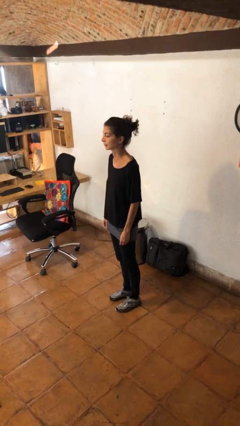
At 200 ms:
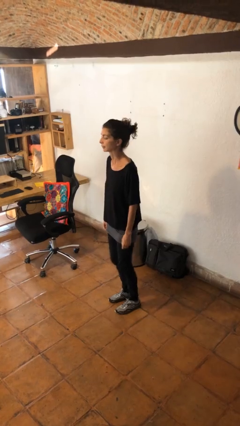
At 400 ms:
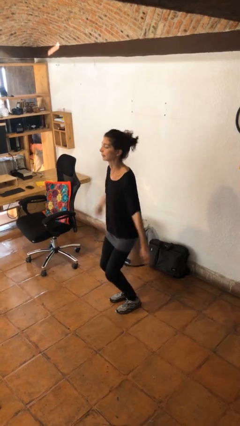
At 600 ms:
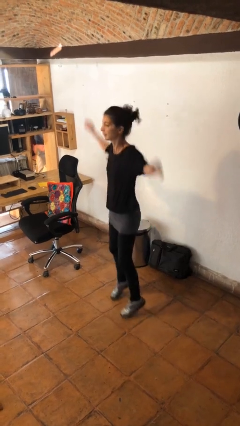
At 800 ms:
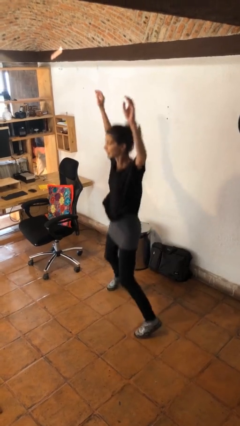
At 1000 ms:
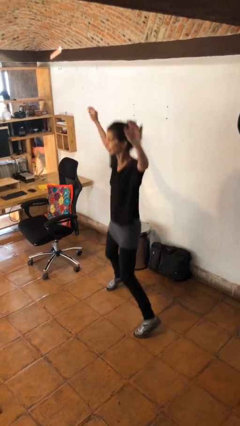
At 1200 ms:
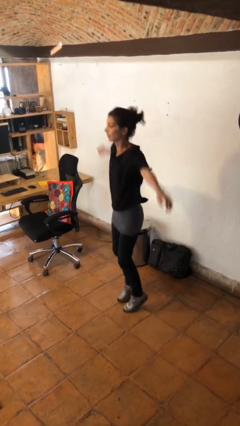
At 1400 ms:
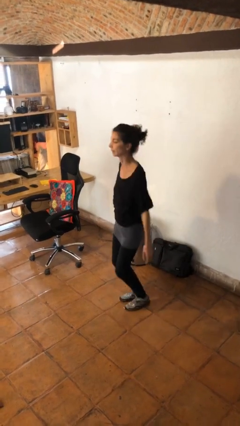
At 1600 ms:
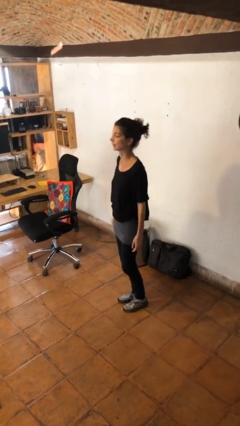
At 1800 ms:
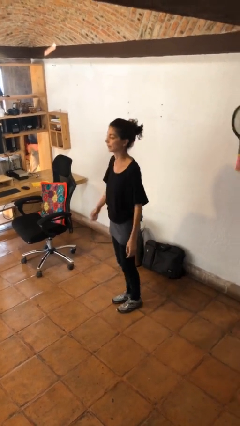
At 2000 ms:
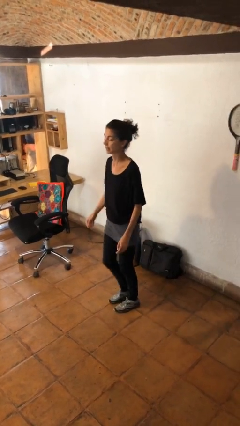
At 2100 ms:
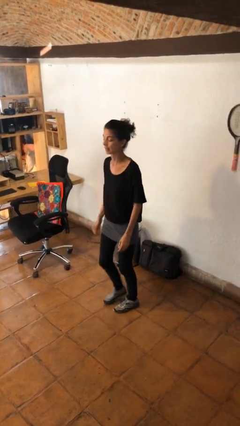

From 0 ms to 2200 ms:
person exercises with jumping jacks

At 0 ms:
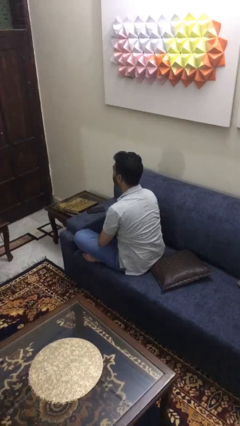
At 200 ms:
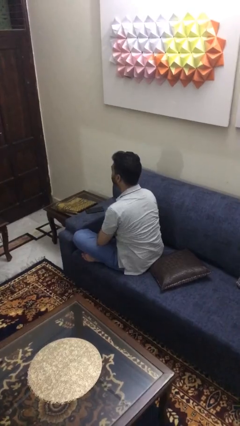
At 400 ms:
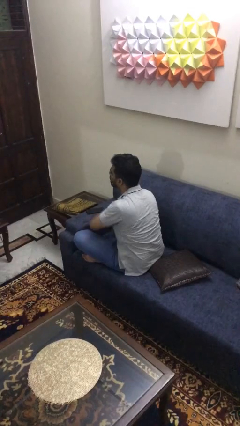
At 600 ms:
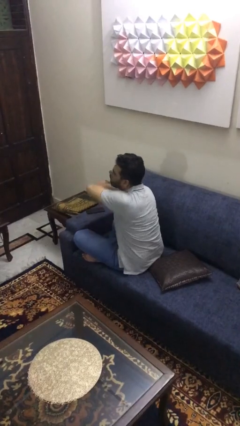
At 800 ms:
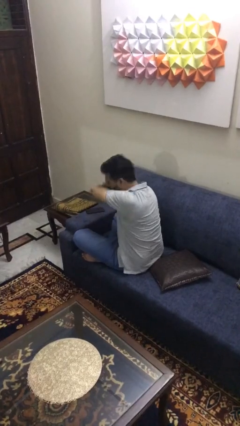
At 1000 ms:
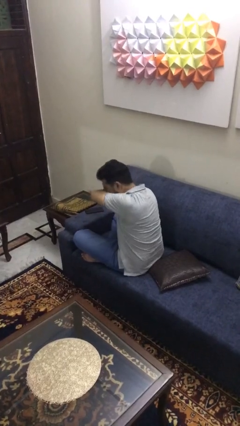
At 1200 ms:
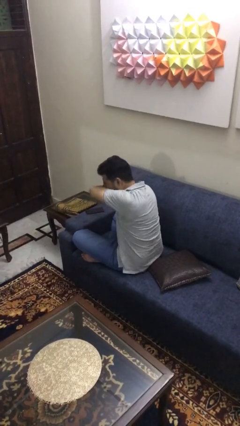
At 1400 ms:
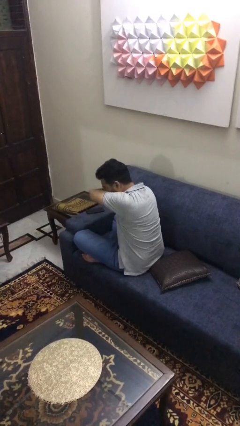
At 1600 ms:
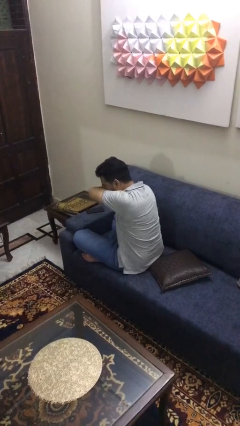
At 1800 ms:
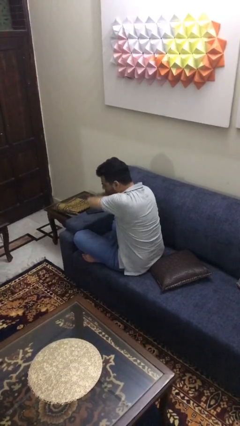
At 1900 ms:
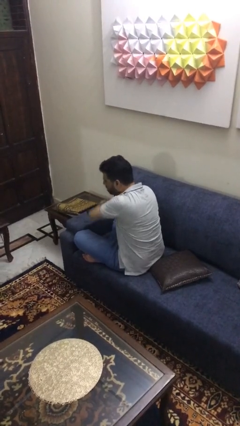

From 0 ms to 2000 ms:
person sneezes into arm

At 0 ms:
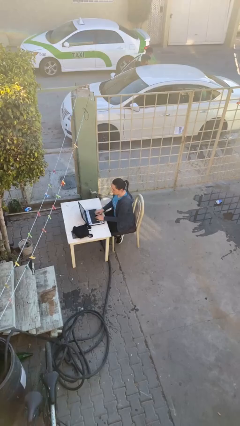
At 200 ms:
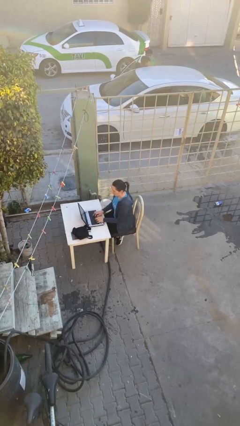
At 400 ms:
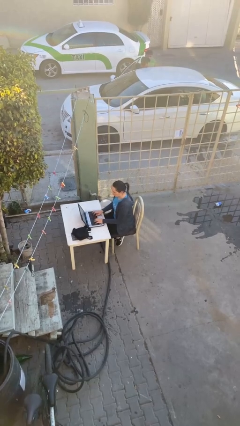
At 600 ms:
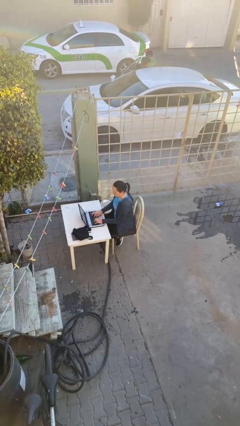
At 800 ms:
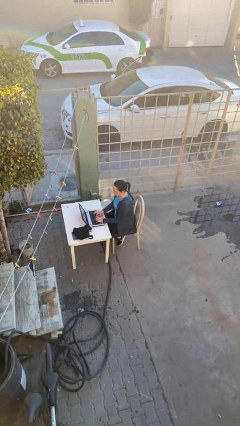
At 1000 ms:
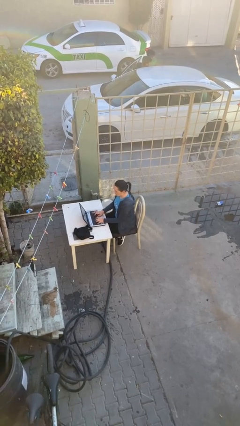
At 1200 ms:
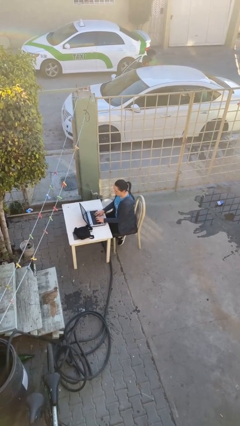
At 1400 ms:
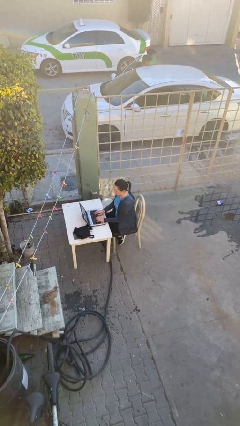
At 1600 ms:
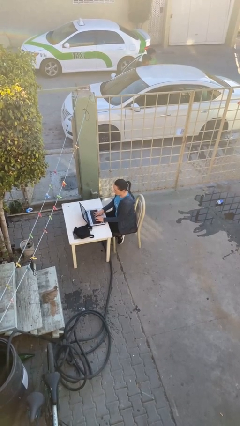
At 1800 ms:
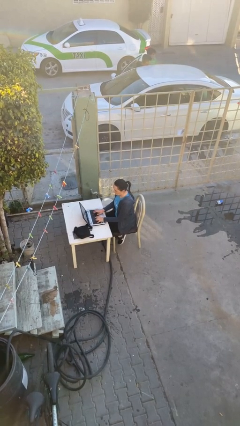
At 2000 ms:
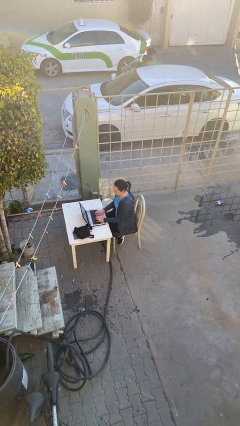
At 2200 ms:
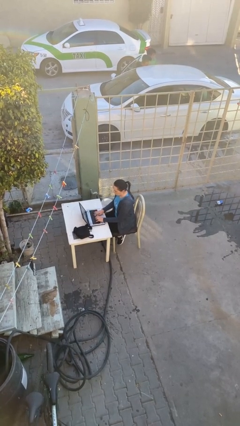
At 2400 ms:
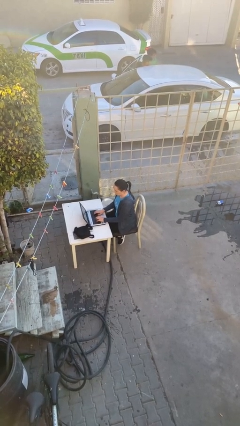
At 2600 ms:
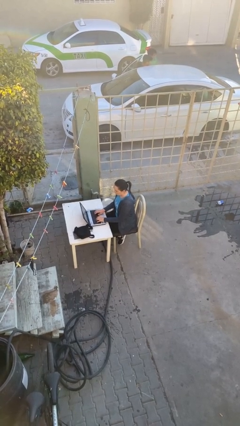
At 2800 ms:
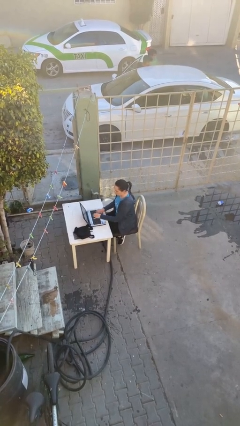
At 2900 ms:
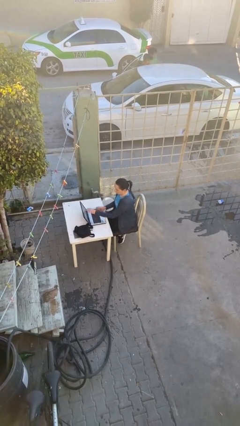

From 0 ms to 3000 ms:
person interacts with laptop

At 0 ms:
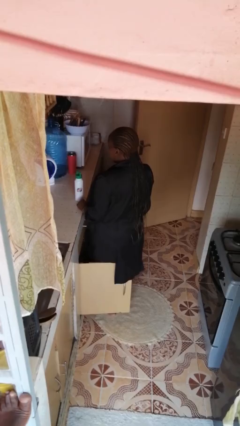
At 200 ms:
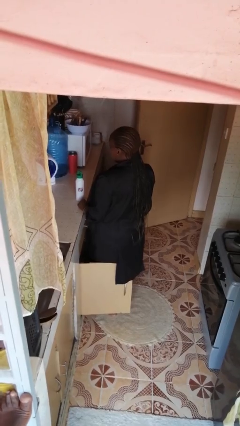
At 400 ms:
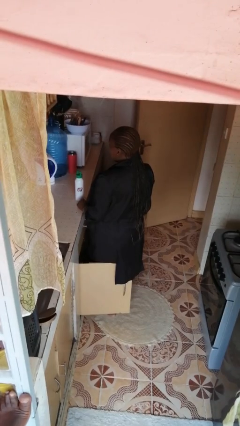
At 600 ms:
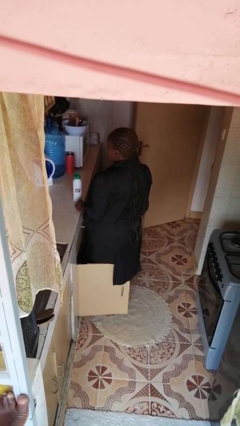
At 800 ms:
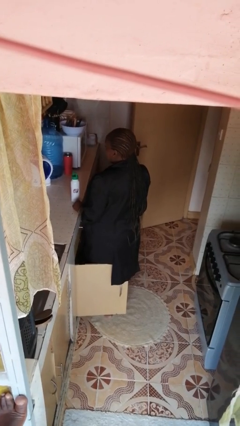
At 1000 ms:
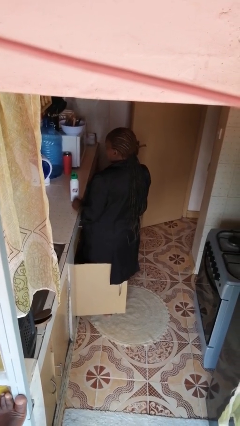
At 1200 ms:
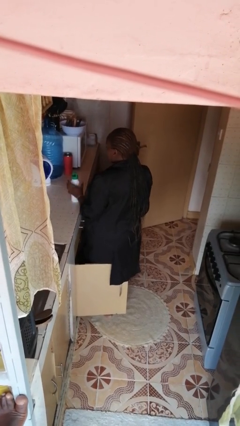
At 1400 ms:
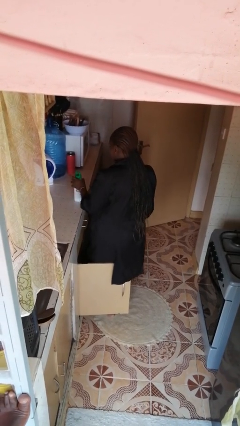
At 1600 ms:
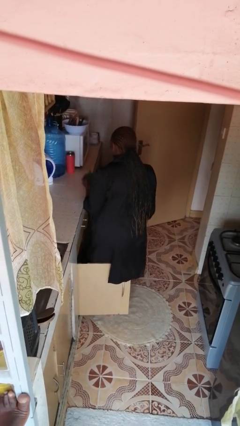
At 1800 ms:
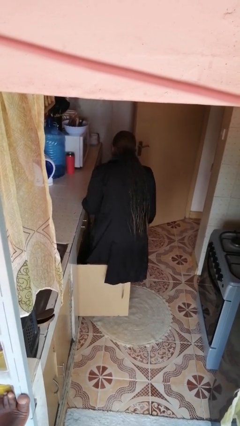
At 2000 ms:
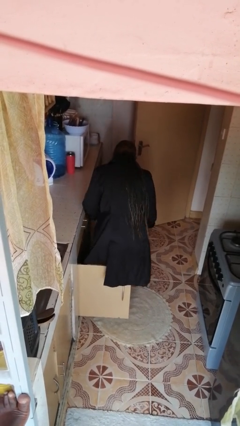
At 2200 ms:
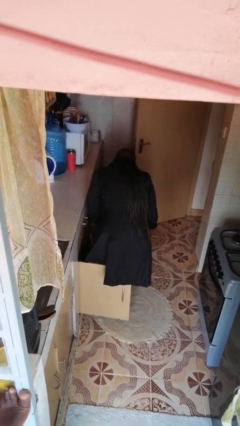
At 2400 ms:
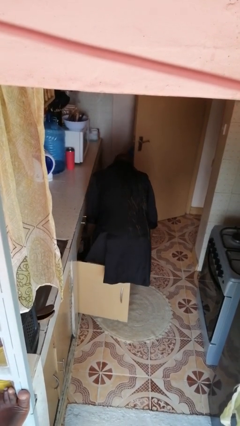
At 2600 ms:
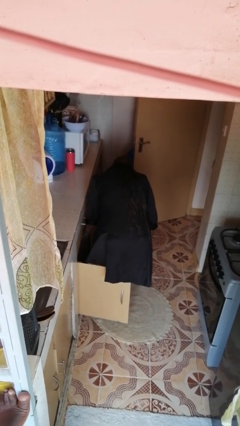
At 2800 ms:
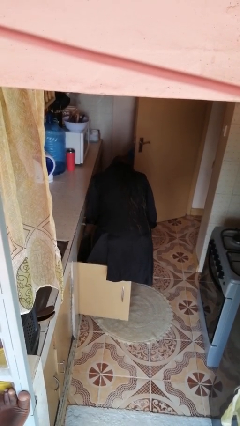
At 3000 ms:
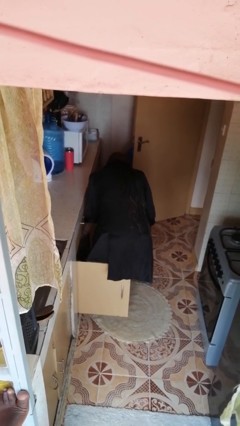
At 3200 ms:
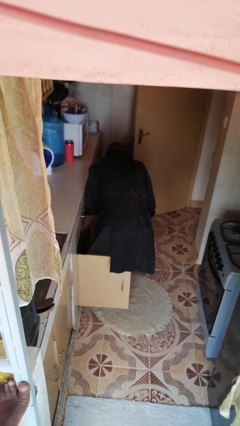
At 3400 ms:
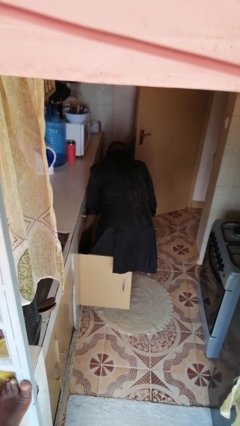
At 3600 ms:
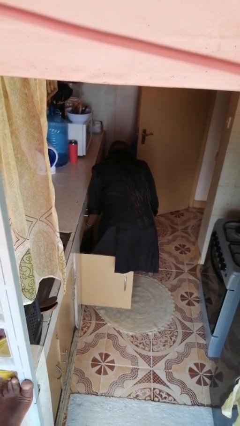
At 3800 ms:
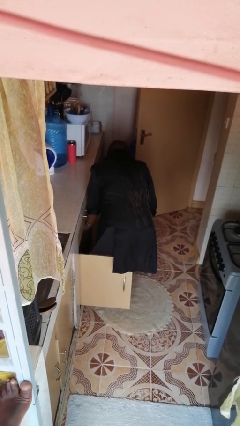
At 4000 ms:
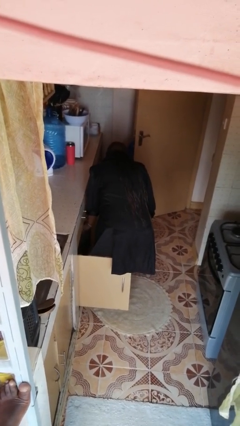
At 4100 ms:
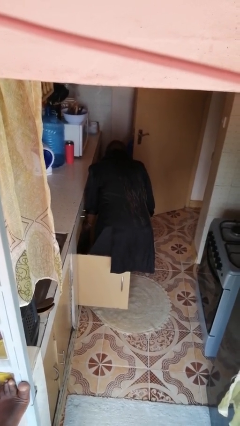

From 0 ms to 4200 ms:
person puts object in cabinet

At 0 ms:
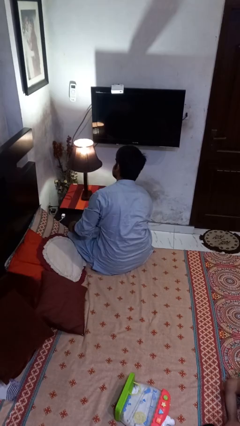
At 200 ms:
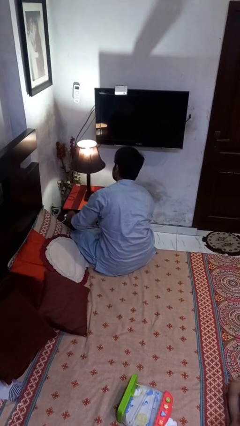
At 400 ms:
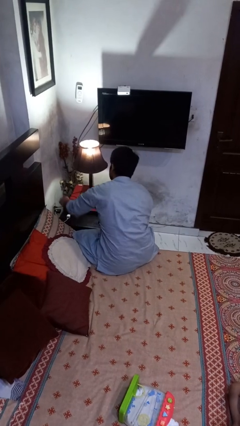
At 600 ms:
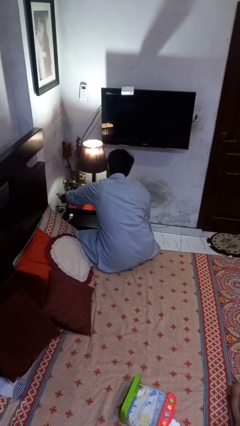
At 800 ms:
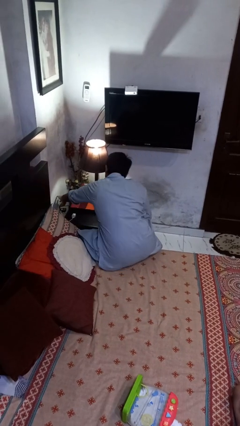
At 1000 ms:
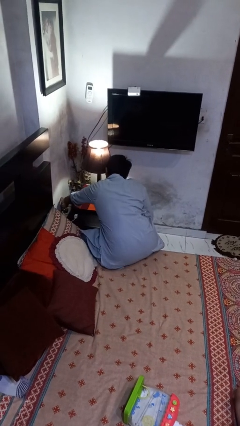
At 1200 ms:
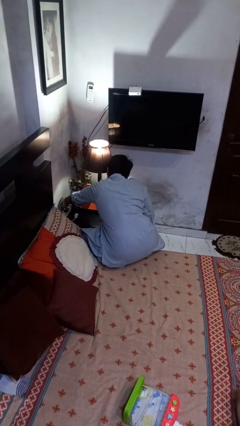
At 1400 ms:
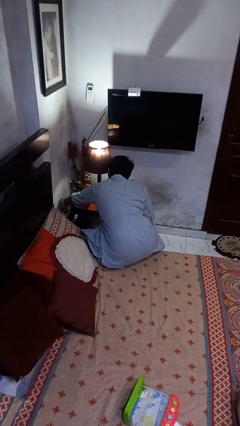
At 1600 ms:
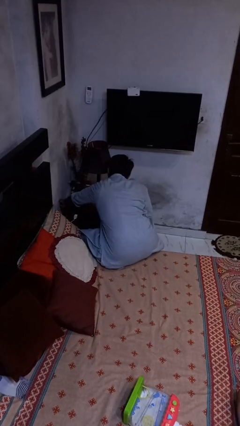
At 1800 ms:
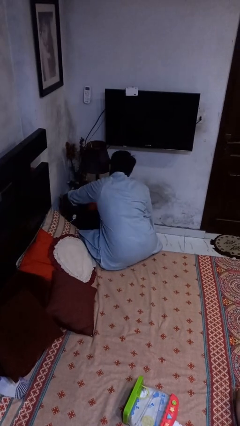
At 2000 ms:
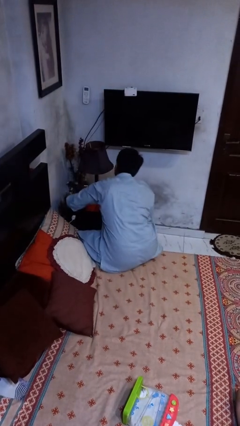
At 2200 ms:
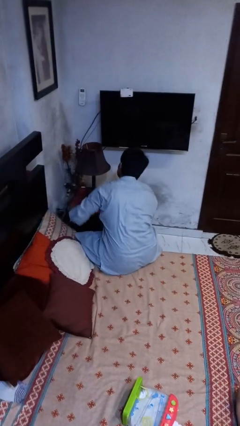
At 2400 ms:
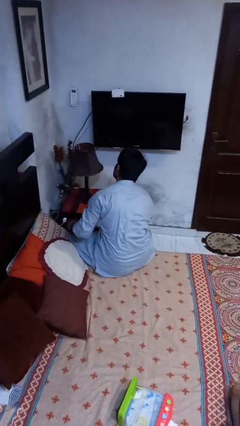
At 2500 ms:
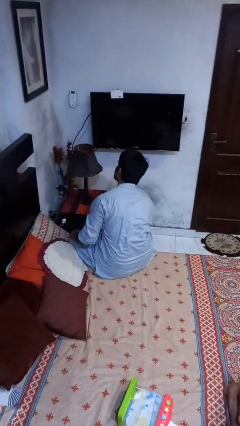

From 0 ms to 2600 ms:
person turns off lamp

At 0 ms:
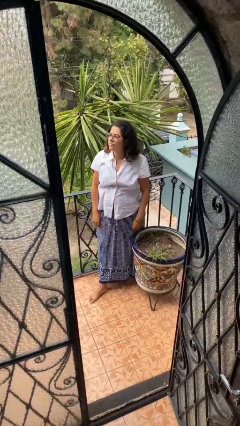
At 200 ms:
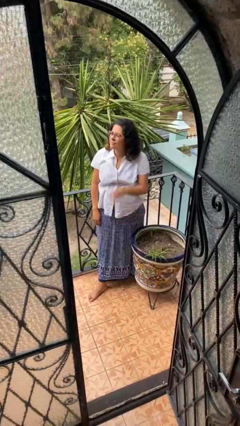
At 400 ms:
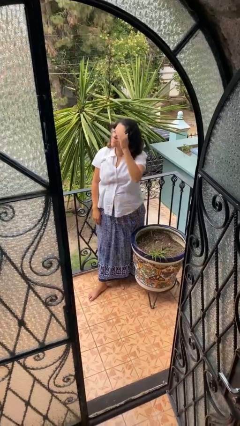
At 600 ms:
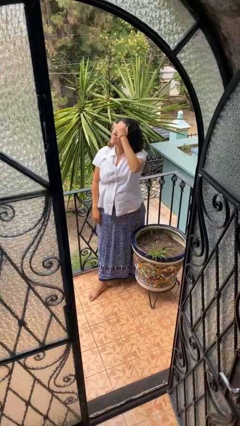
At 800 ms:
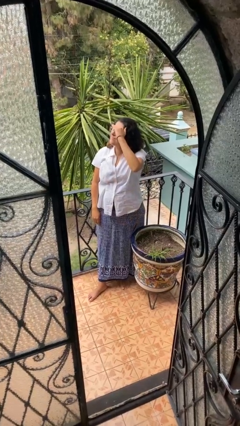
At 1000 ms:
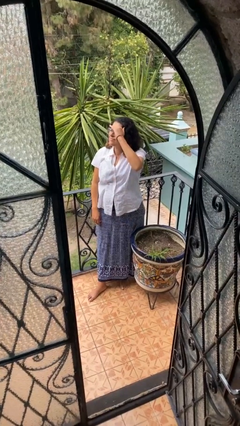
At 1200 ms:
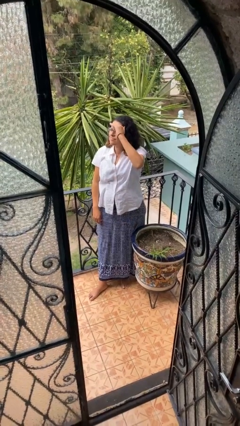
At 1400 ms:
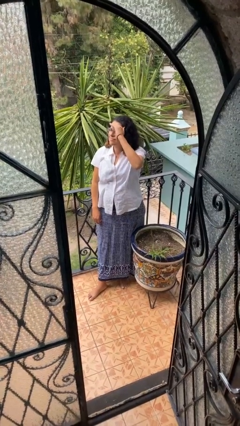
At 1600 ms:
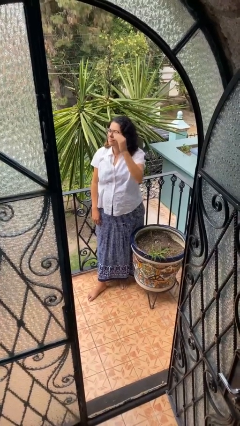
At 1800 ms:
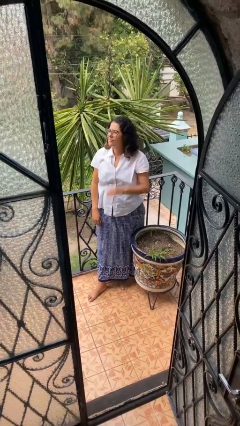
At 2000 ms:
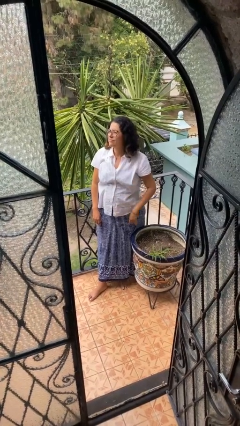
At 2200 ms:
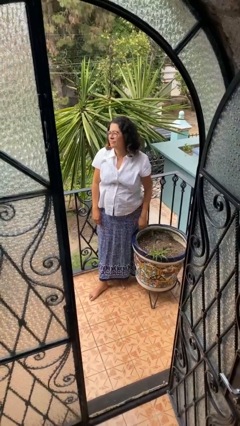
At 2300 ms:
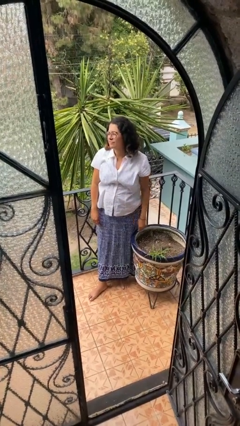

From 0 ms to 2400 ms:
person shades eyes

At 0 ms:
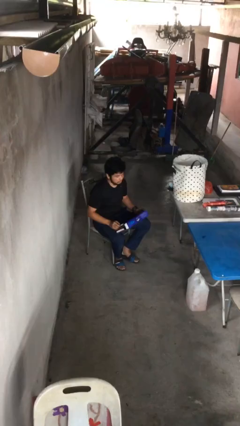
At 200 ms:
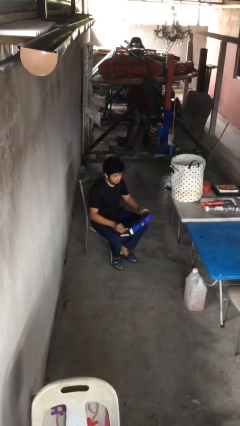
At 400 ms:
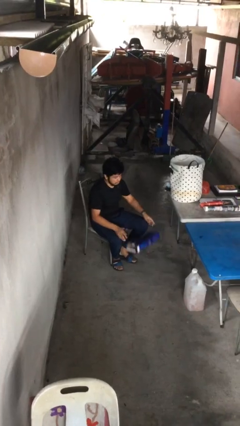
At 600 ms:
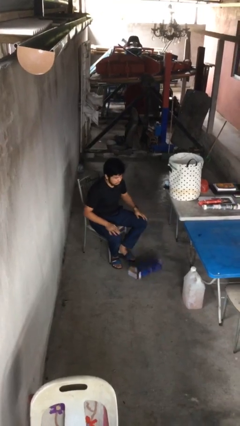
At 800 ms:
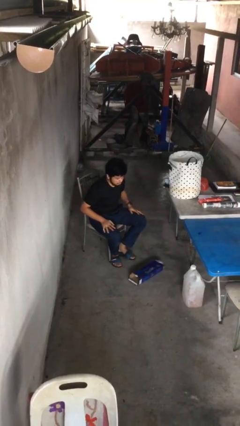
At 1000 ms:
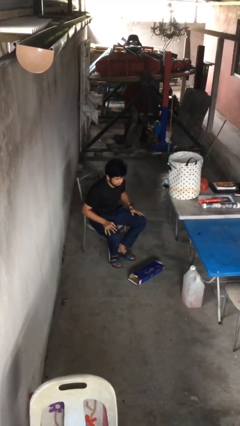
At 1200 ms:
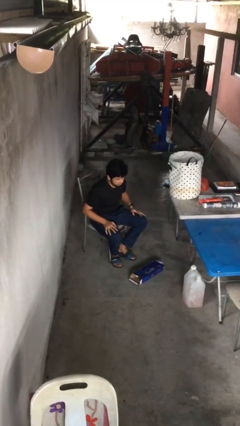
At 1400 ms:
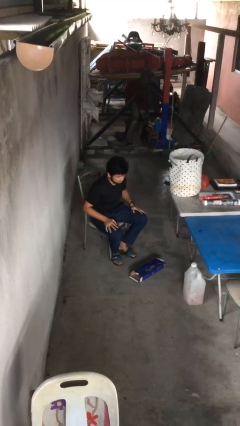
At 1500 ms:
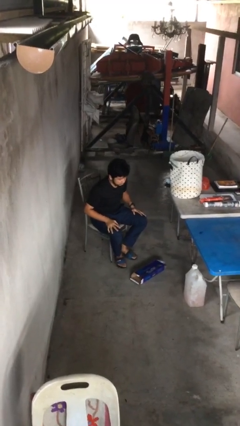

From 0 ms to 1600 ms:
person drops object
